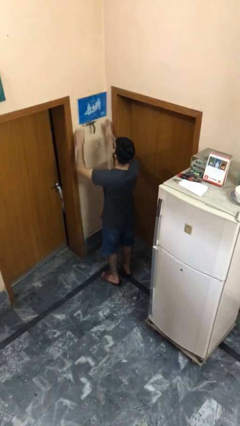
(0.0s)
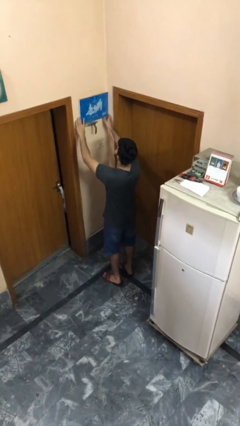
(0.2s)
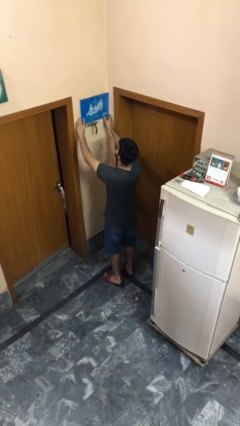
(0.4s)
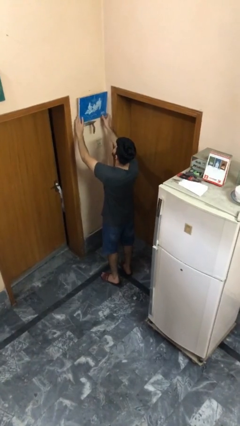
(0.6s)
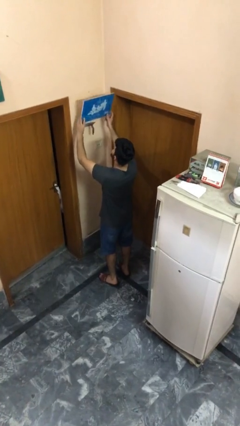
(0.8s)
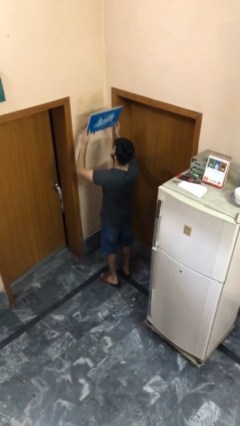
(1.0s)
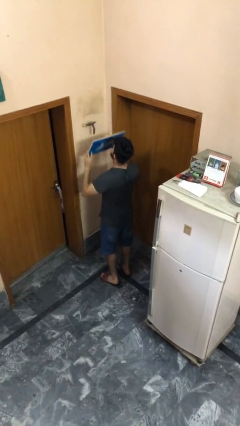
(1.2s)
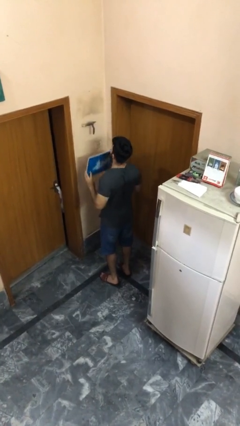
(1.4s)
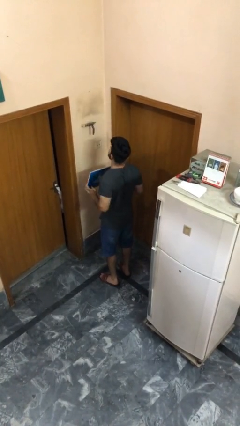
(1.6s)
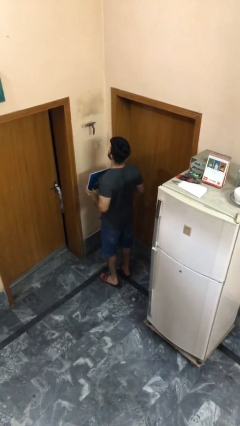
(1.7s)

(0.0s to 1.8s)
person takes down picture frame

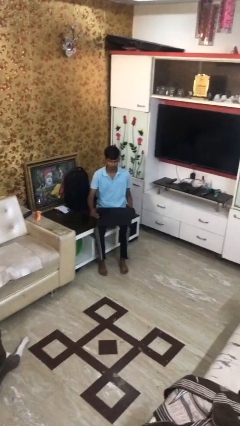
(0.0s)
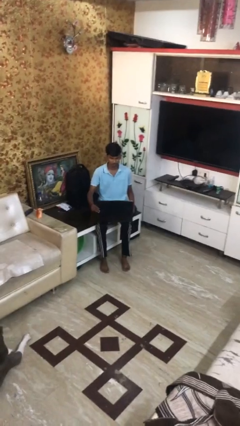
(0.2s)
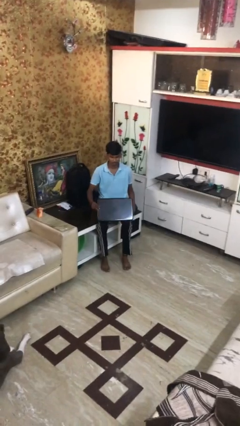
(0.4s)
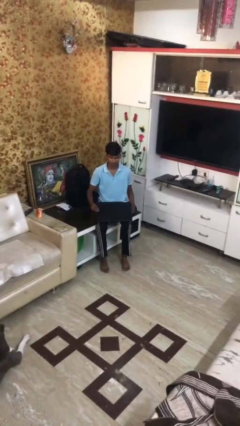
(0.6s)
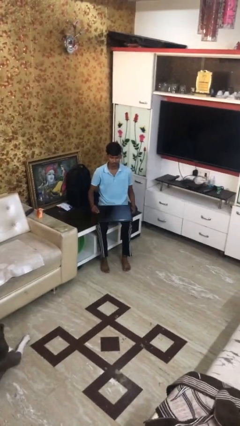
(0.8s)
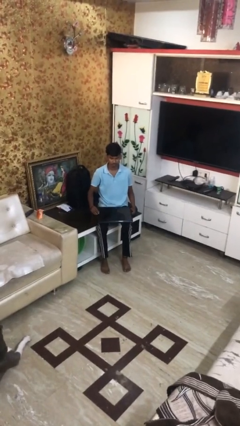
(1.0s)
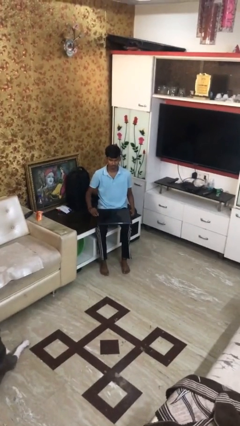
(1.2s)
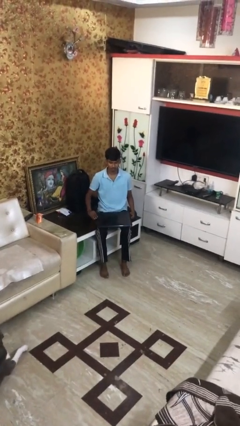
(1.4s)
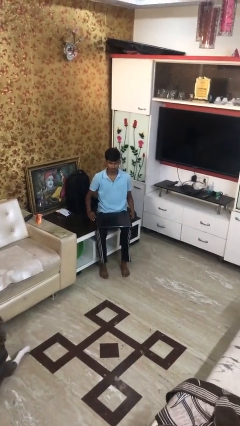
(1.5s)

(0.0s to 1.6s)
person closes laptop

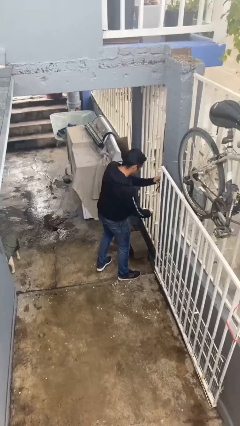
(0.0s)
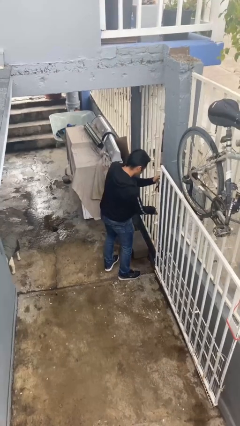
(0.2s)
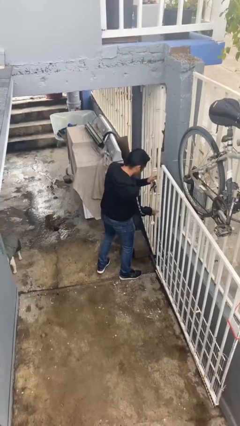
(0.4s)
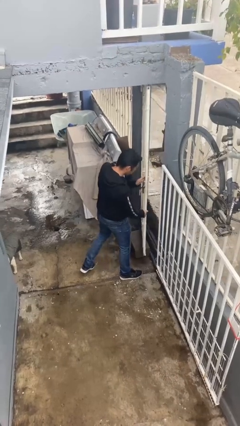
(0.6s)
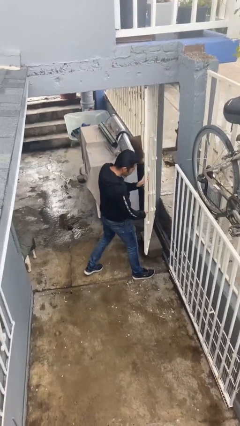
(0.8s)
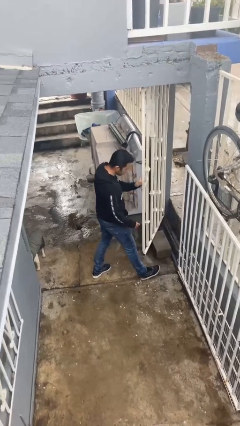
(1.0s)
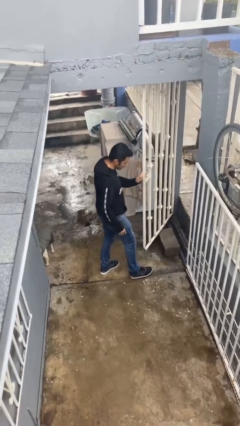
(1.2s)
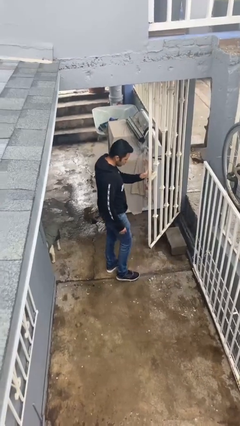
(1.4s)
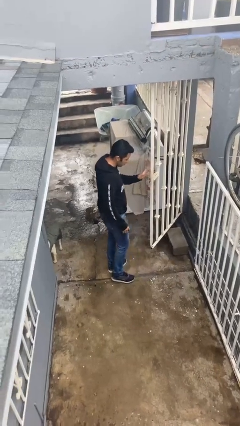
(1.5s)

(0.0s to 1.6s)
person opens facility door

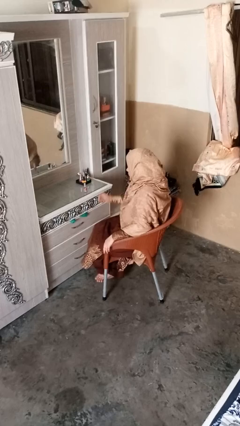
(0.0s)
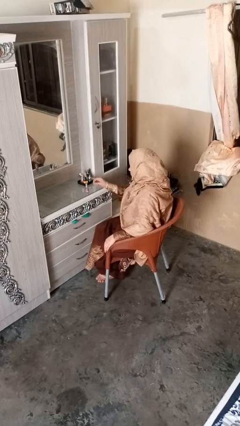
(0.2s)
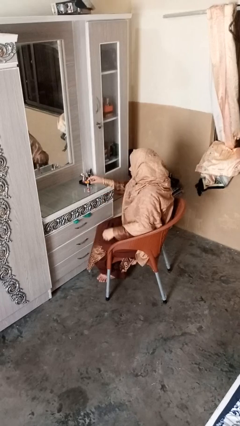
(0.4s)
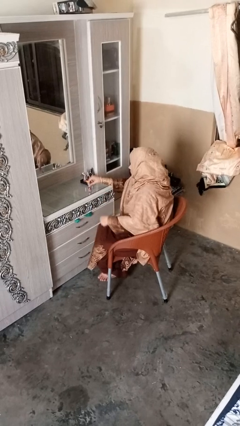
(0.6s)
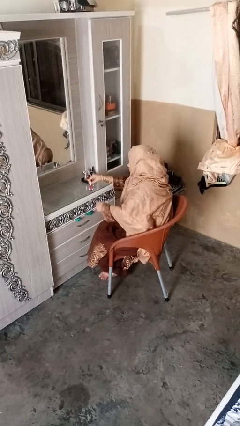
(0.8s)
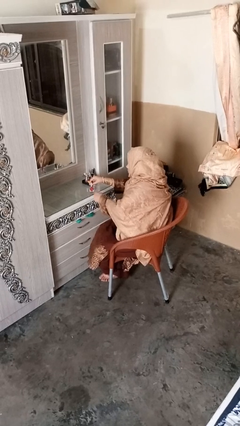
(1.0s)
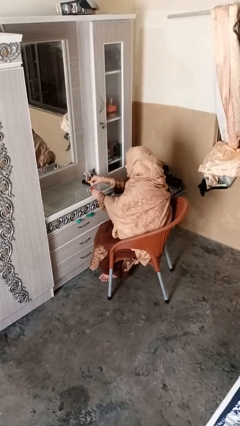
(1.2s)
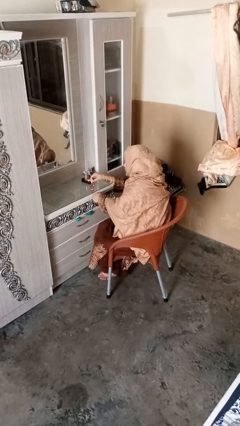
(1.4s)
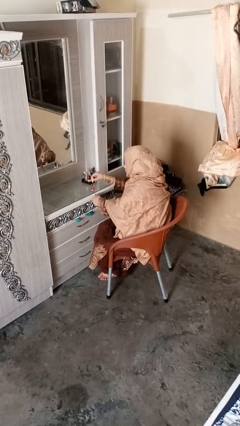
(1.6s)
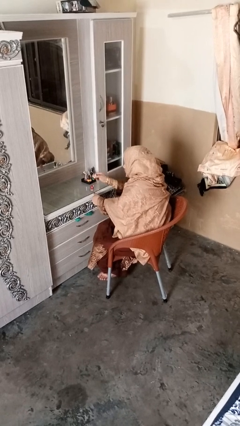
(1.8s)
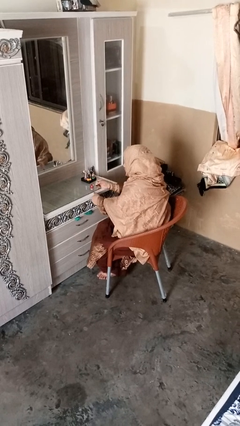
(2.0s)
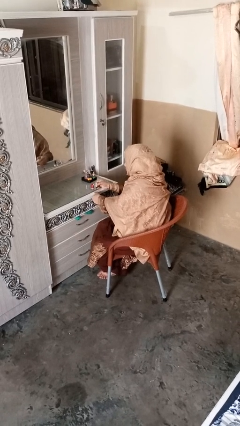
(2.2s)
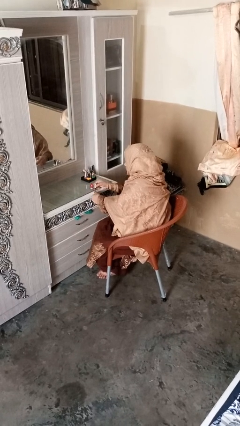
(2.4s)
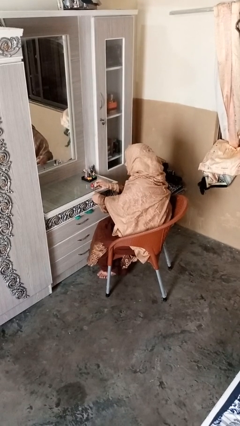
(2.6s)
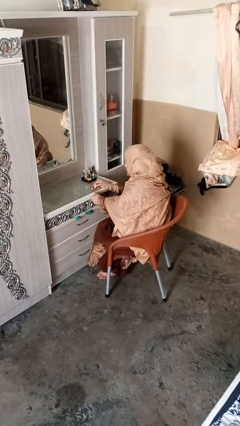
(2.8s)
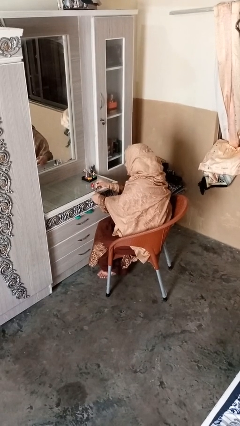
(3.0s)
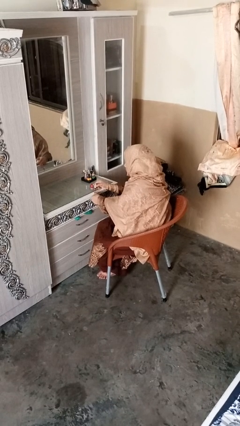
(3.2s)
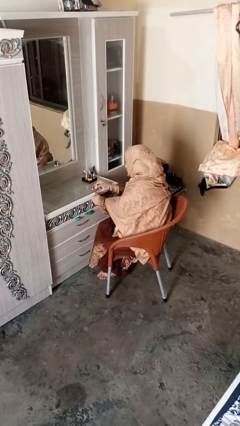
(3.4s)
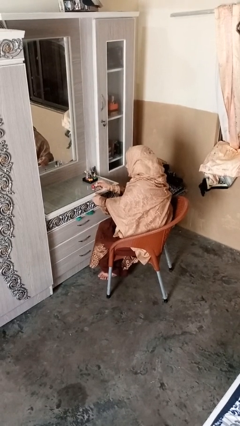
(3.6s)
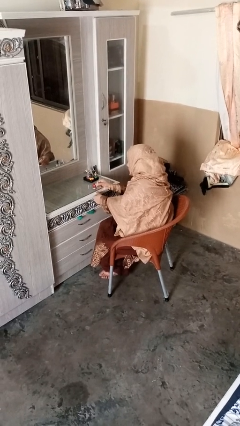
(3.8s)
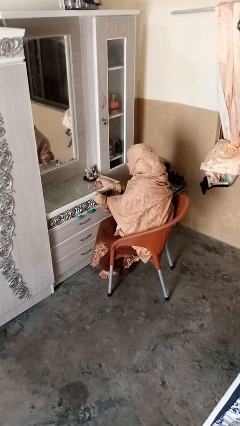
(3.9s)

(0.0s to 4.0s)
person paints fingernails

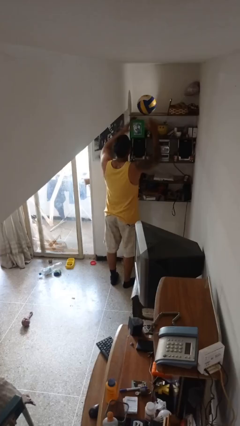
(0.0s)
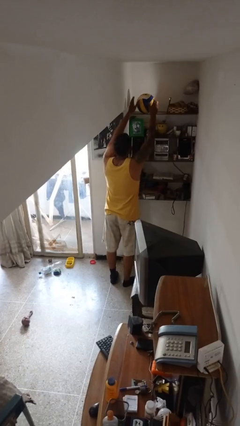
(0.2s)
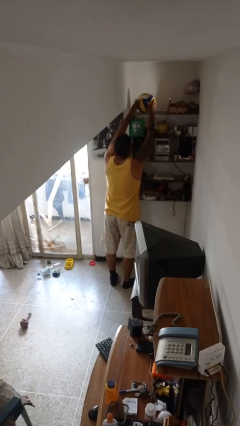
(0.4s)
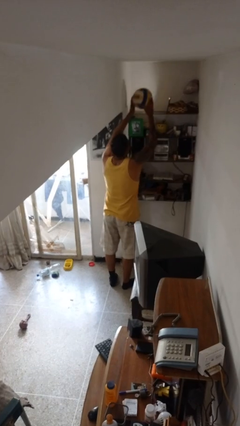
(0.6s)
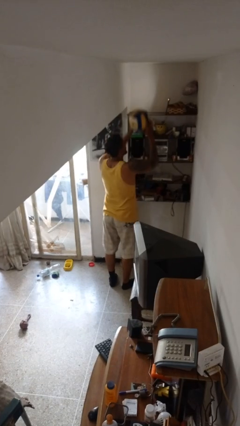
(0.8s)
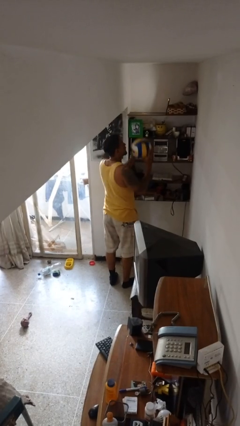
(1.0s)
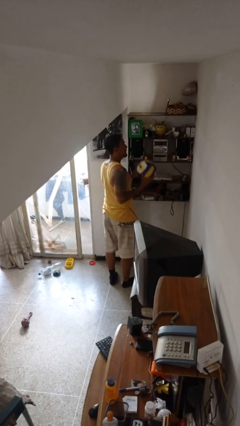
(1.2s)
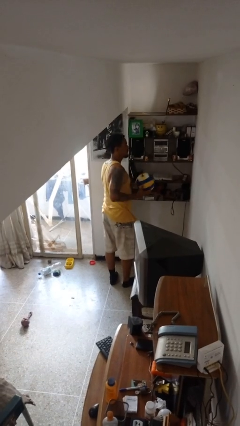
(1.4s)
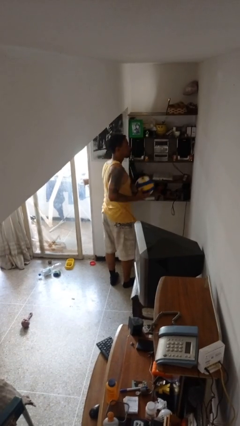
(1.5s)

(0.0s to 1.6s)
person picks up object from shelf

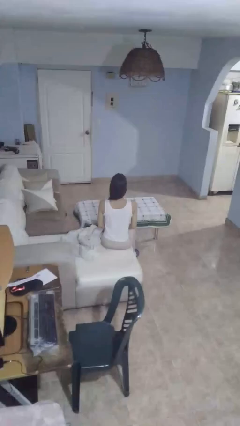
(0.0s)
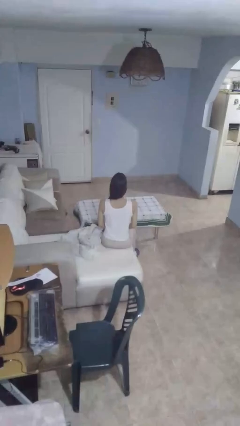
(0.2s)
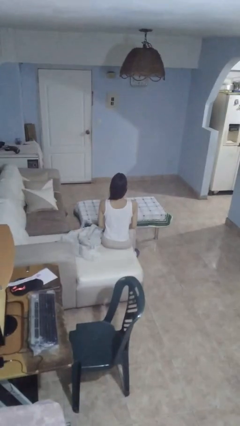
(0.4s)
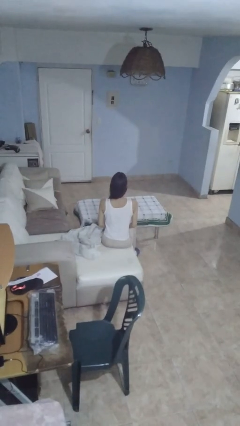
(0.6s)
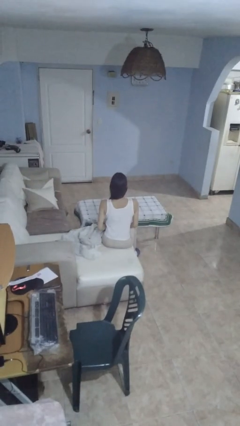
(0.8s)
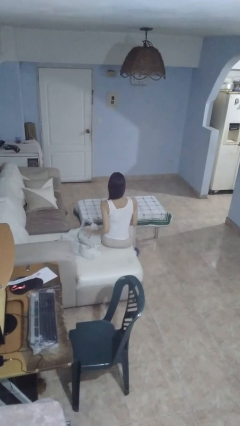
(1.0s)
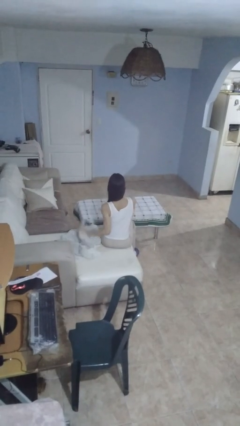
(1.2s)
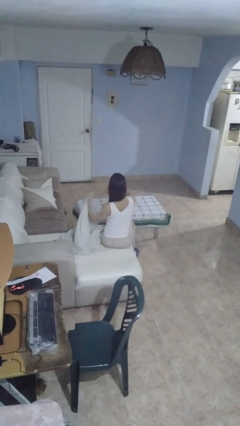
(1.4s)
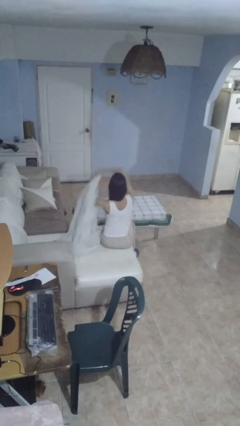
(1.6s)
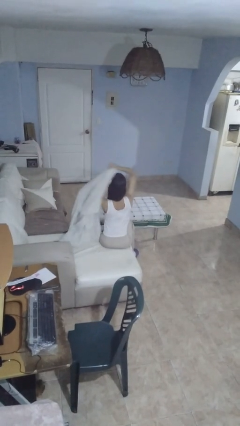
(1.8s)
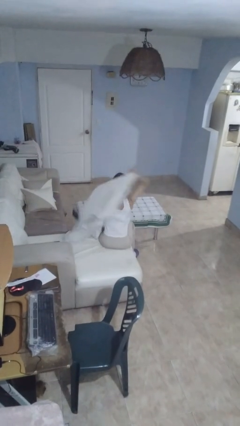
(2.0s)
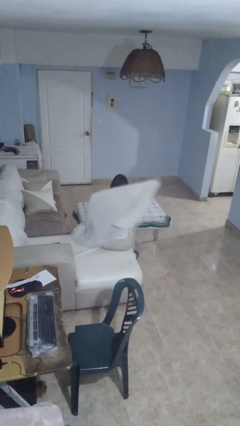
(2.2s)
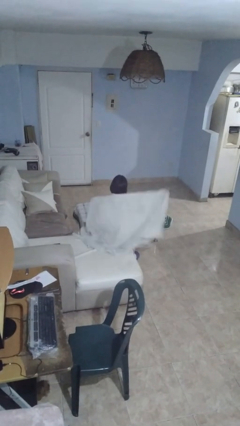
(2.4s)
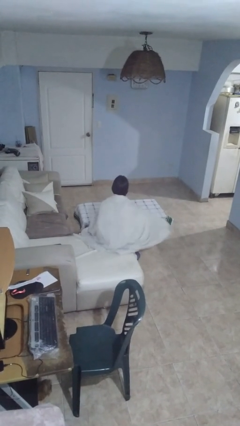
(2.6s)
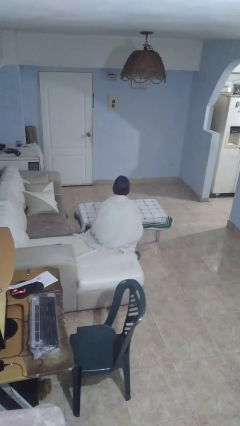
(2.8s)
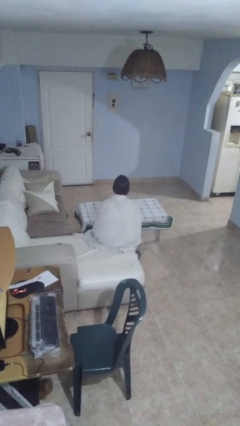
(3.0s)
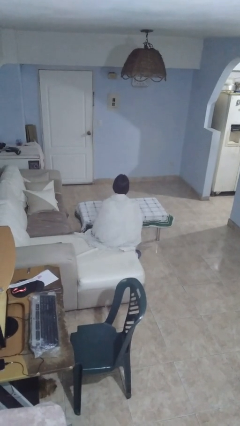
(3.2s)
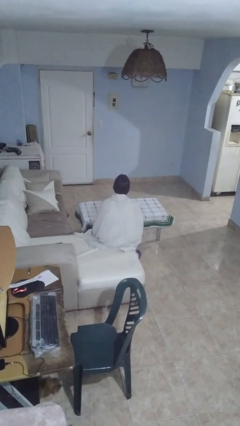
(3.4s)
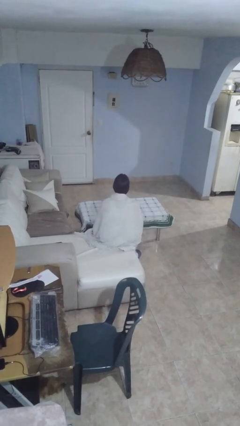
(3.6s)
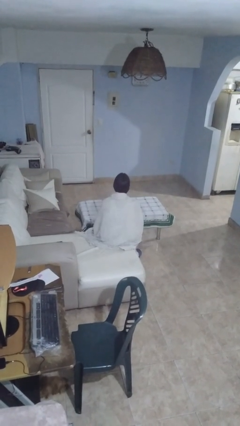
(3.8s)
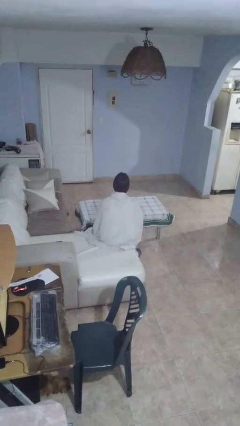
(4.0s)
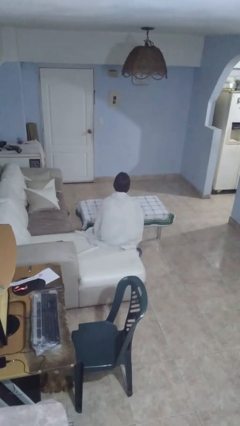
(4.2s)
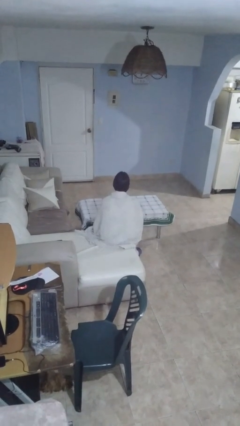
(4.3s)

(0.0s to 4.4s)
person covers with blanket

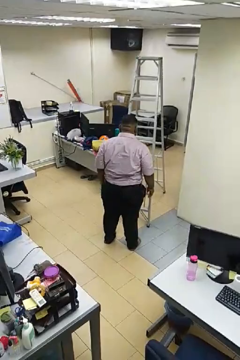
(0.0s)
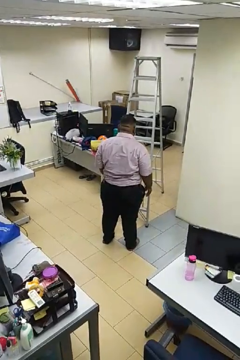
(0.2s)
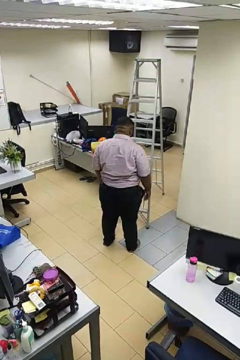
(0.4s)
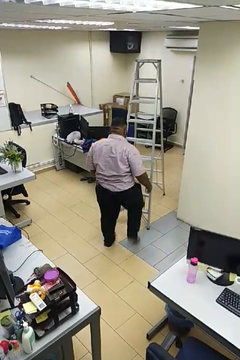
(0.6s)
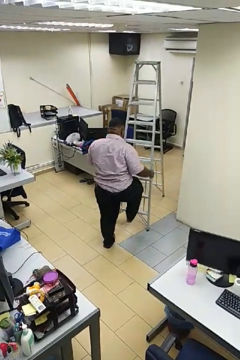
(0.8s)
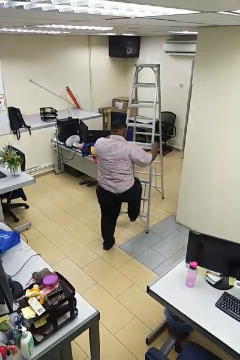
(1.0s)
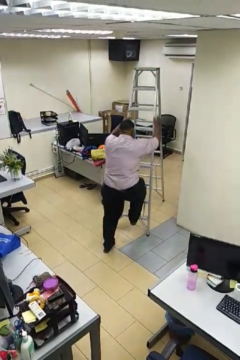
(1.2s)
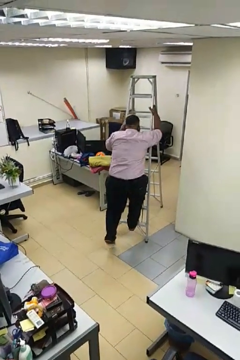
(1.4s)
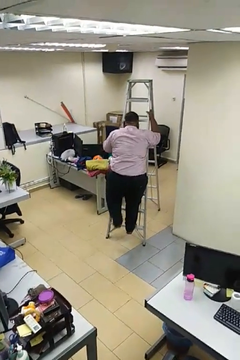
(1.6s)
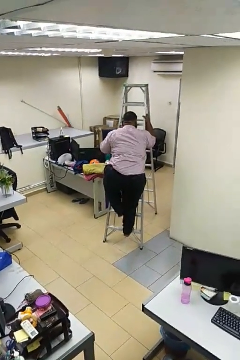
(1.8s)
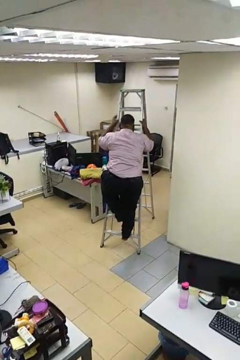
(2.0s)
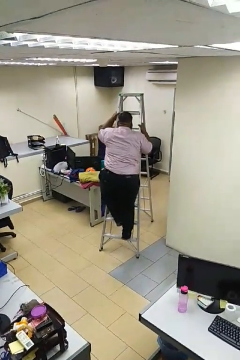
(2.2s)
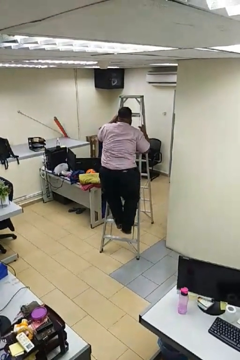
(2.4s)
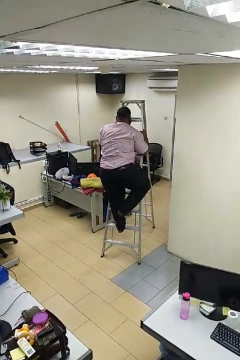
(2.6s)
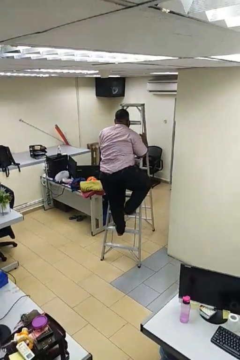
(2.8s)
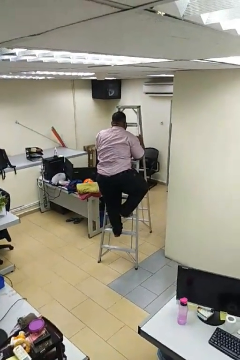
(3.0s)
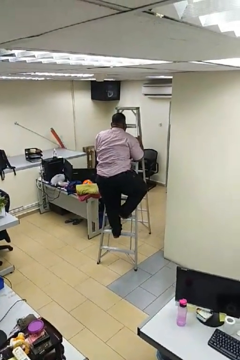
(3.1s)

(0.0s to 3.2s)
person climbs up ladder
